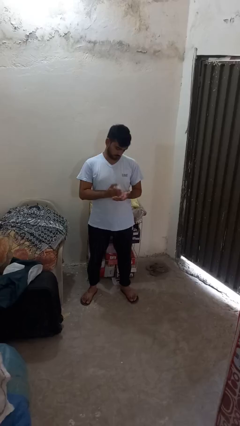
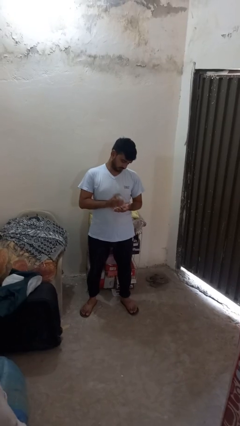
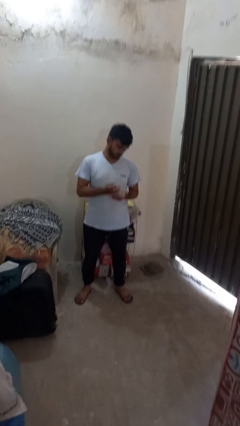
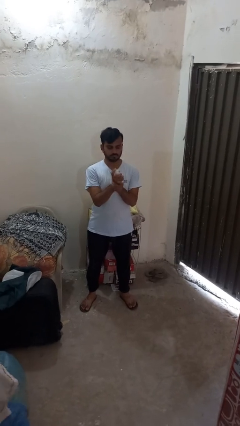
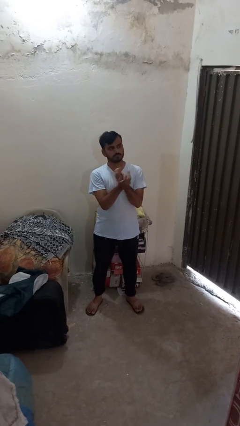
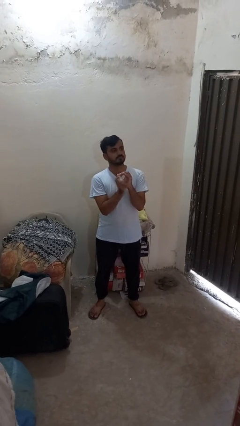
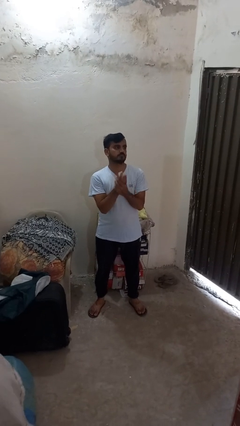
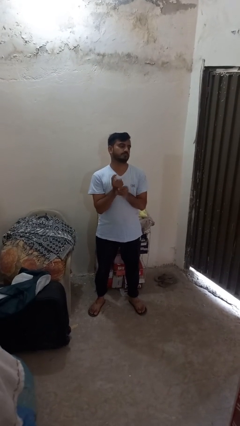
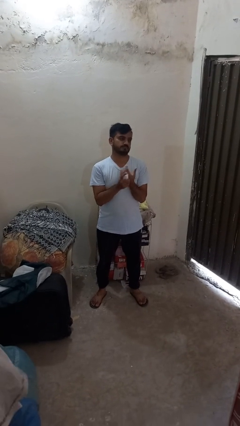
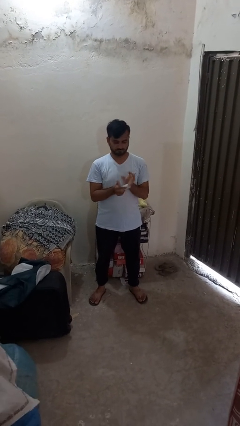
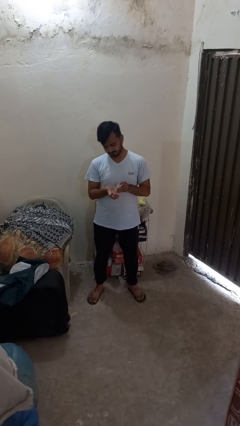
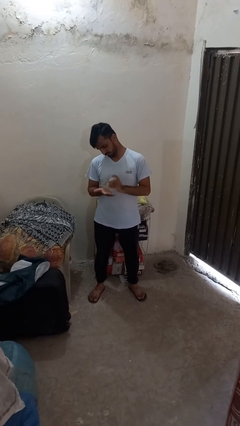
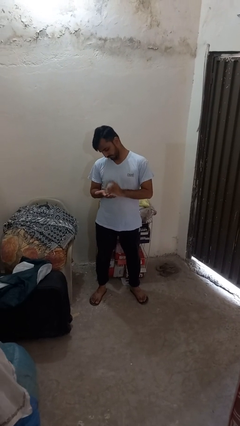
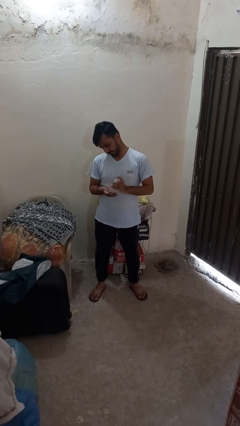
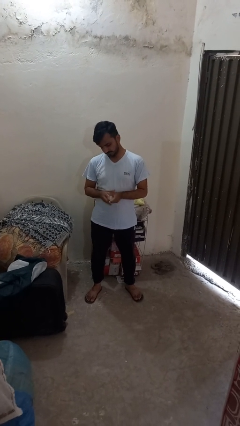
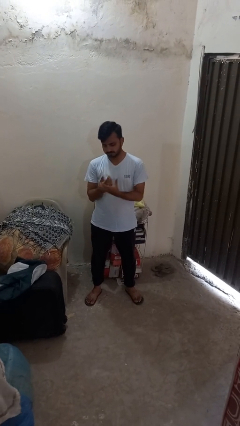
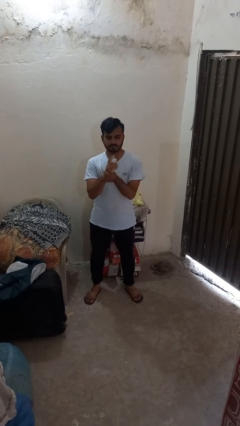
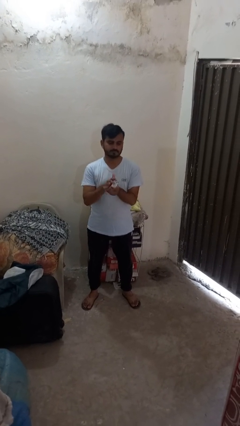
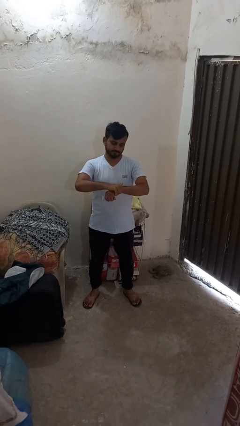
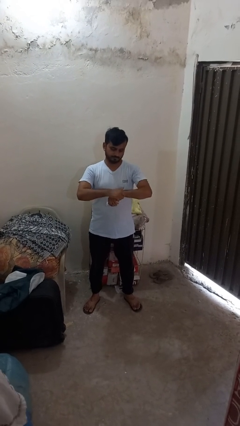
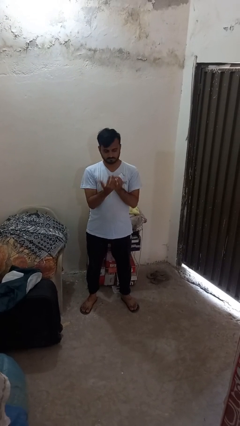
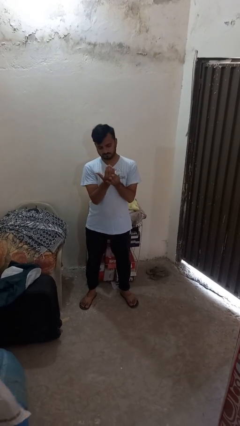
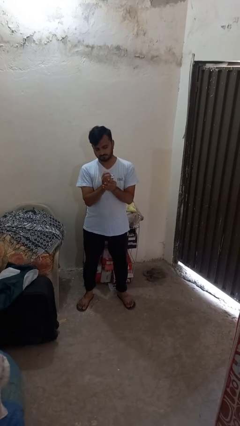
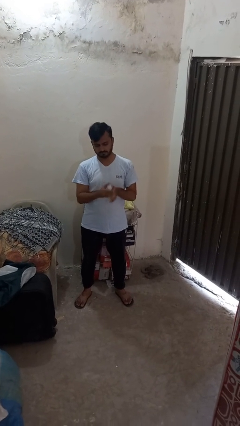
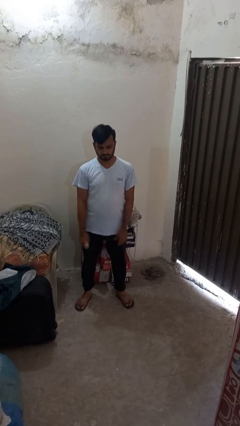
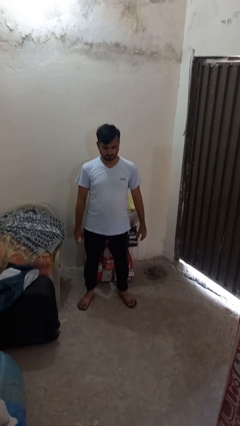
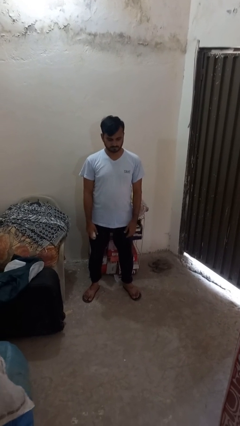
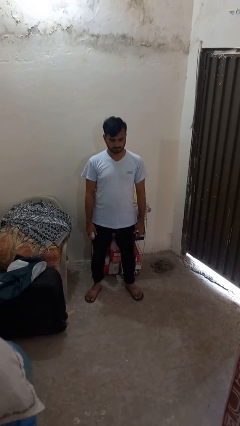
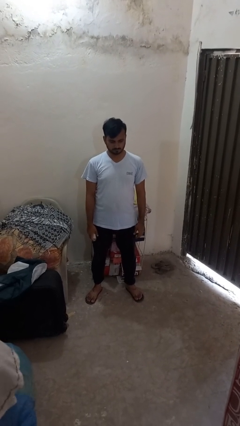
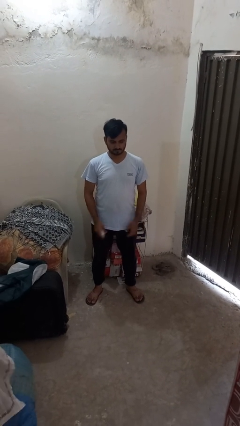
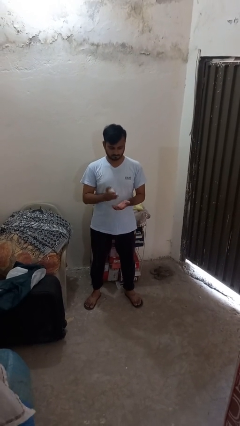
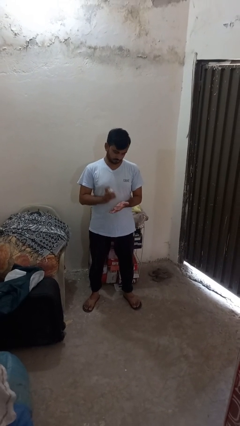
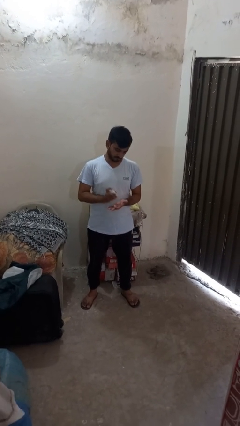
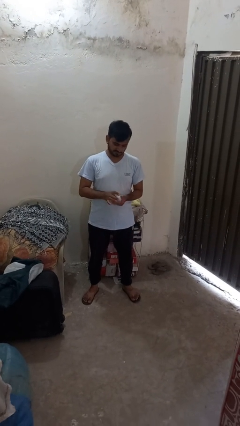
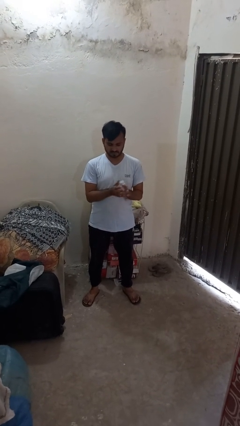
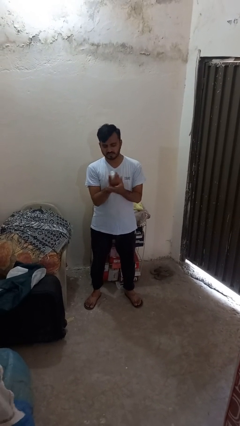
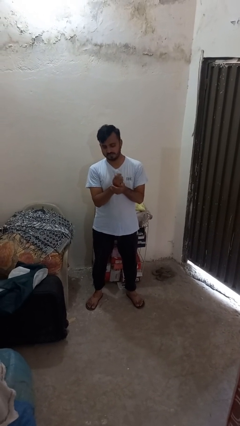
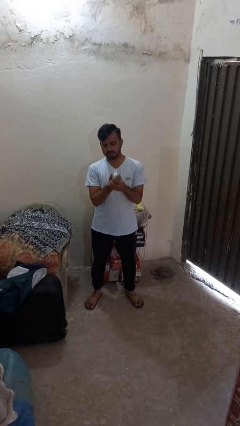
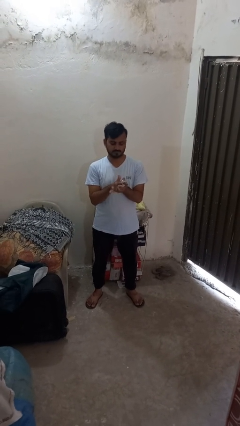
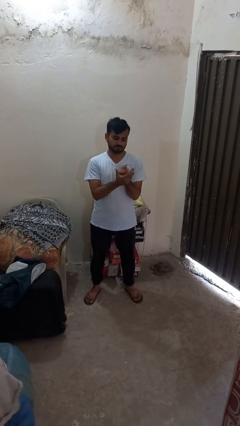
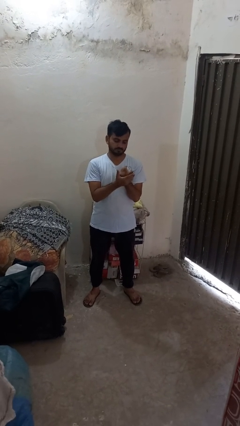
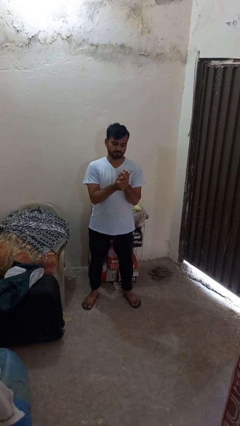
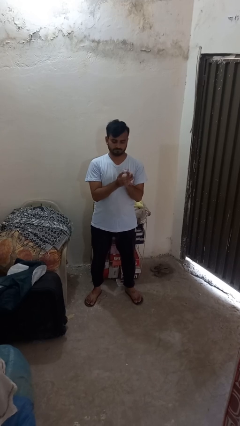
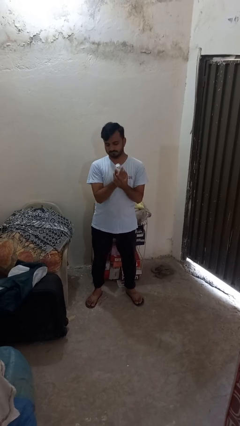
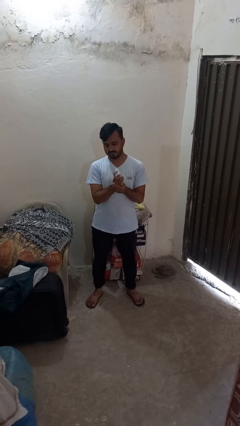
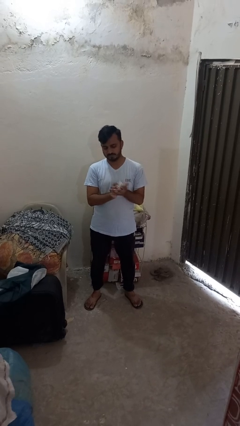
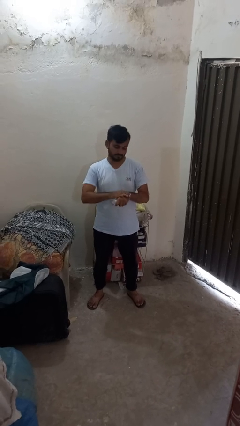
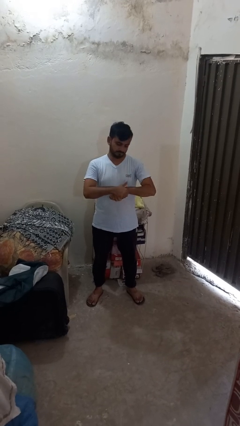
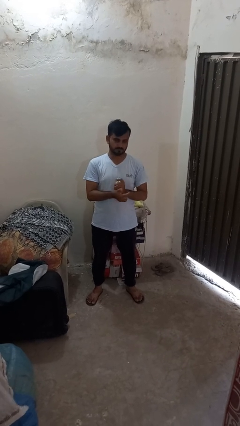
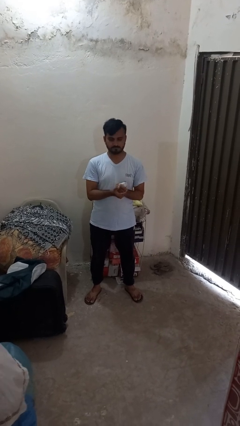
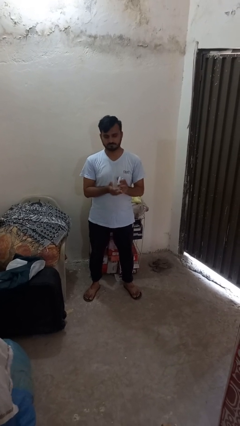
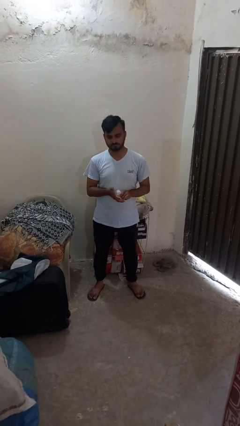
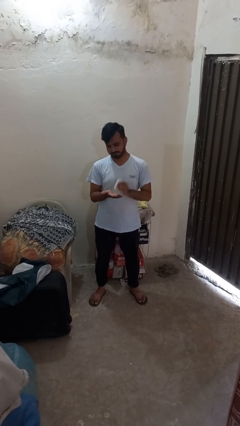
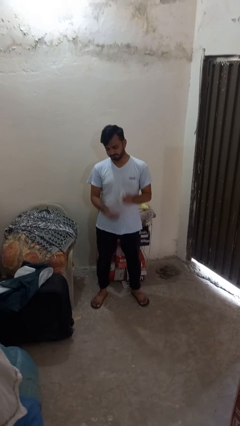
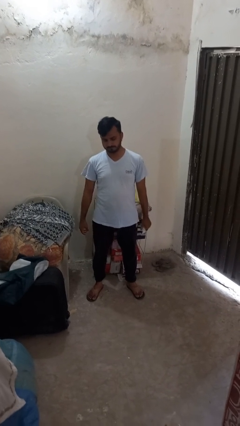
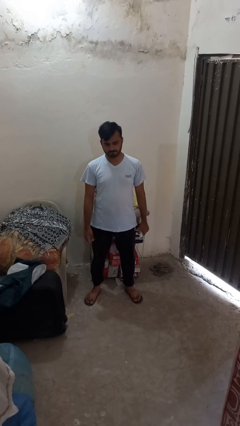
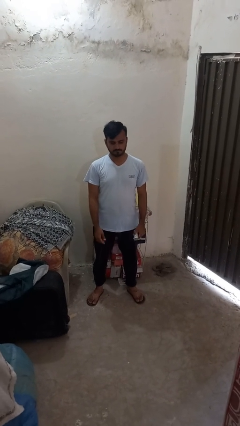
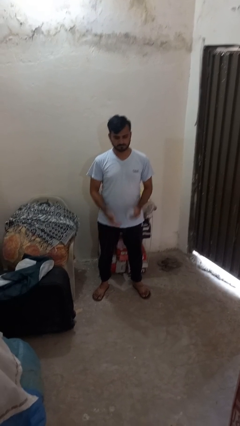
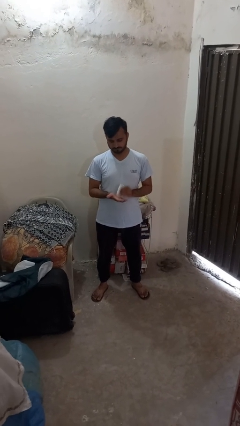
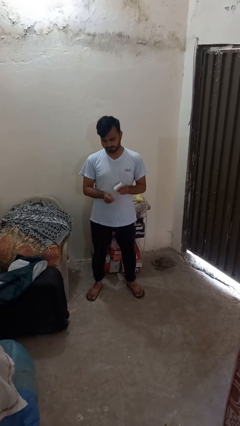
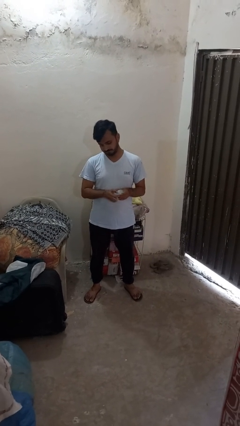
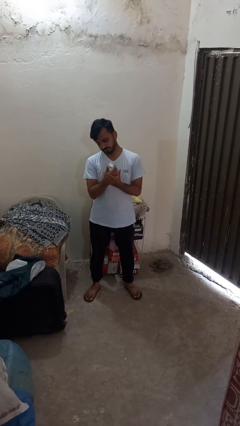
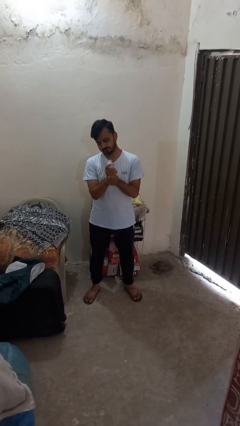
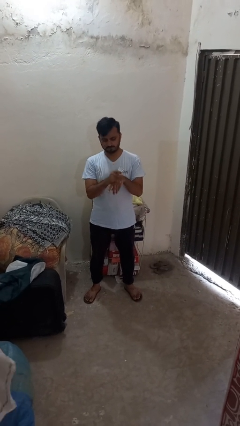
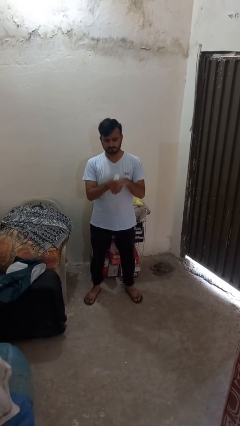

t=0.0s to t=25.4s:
person applies sunscreen

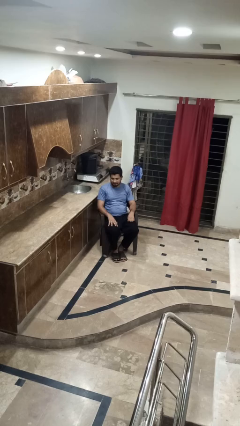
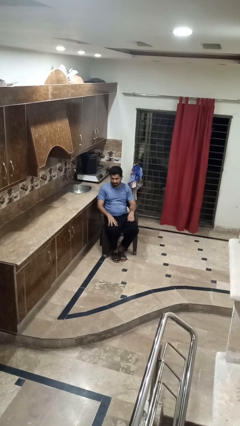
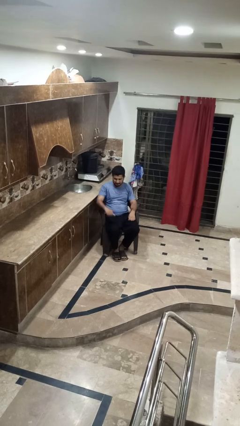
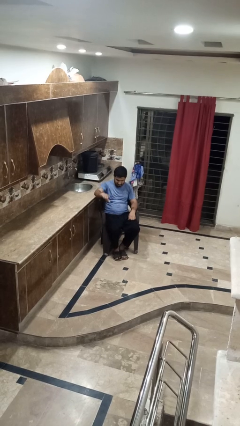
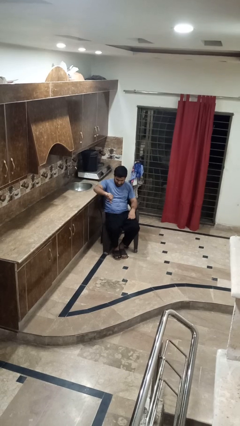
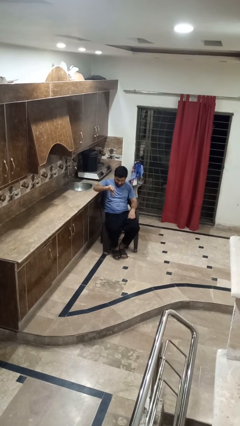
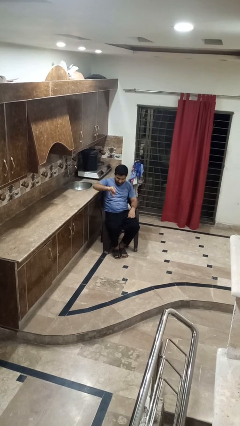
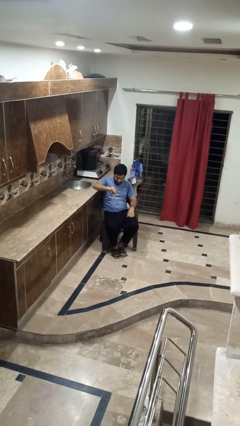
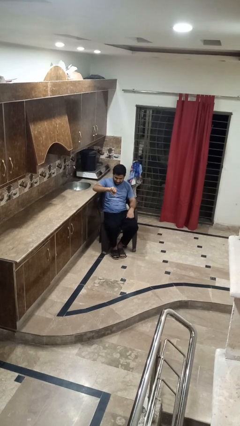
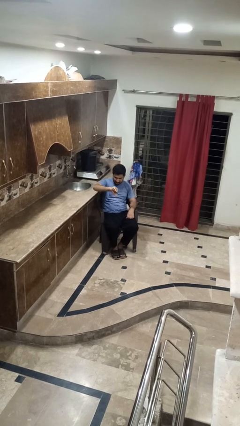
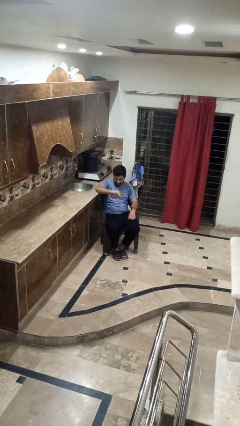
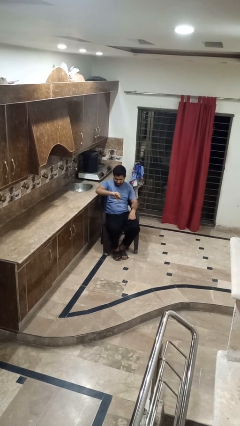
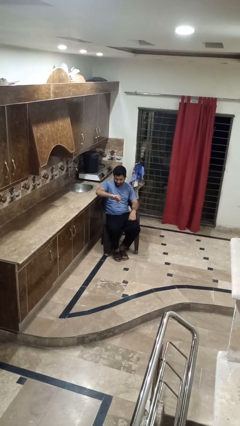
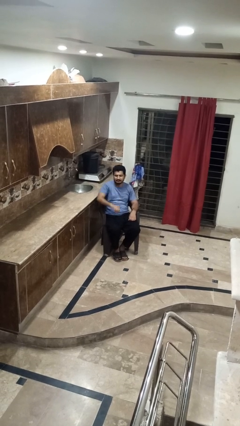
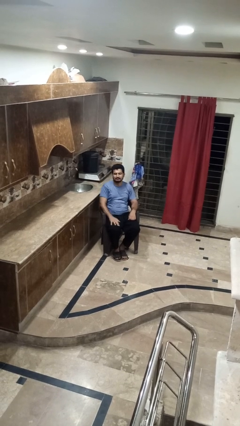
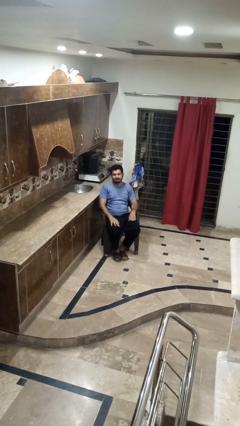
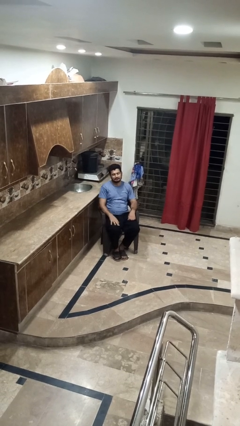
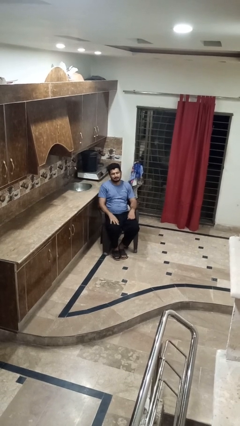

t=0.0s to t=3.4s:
person gestures thumbs down

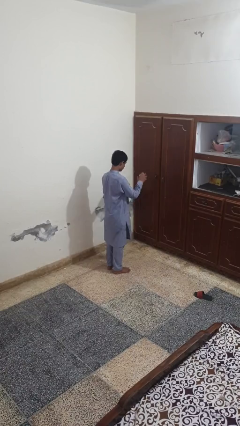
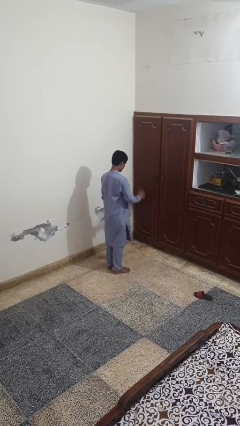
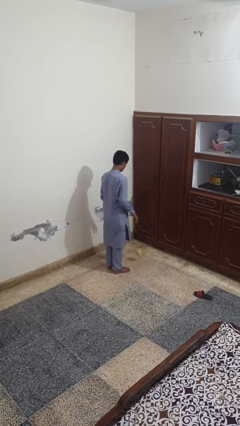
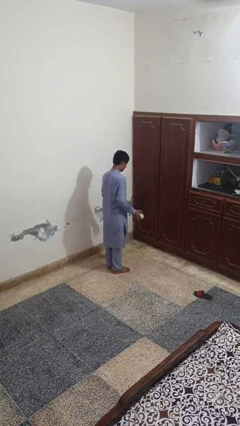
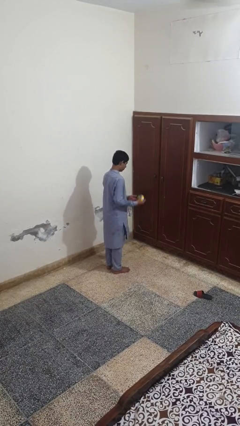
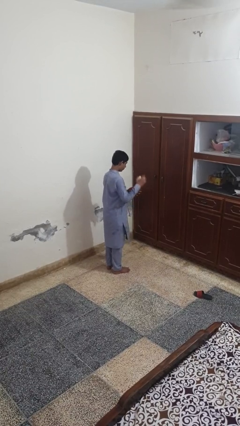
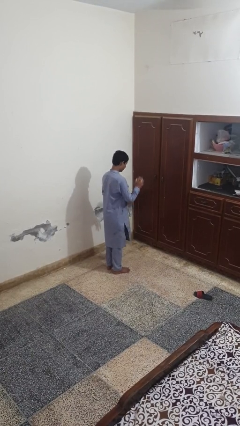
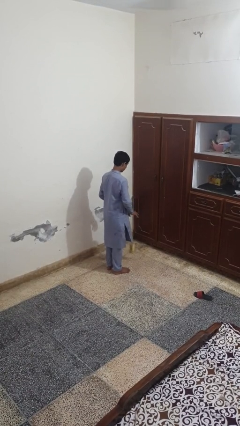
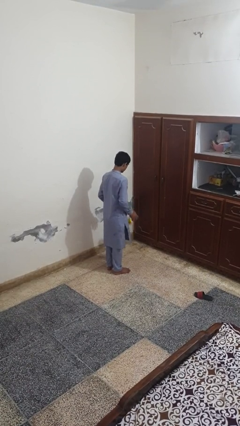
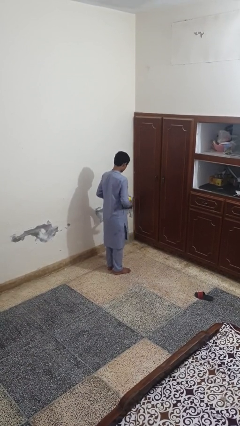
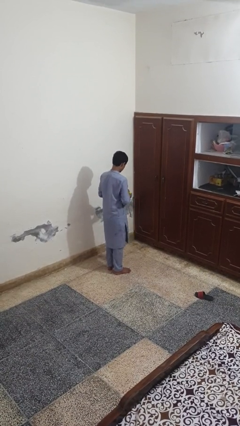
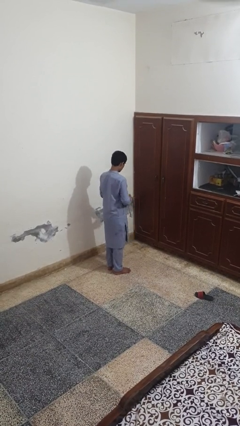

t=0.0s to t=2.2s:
person bounces ball on floor
